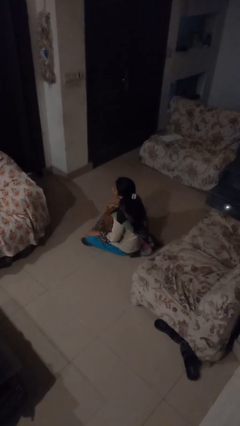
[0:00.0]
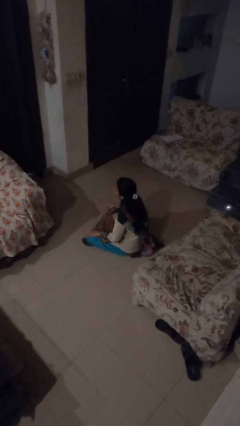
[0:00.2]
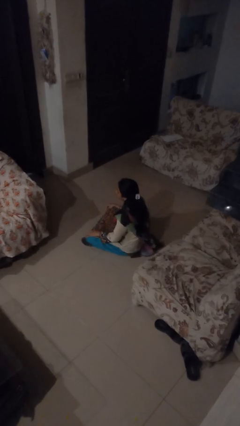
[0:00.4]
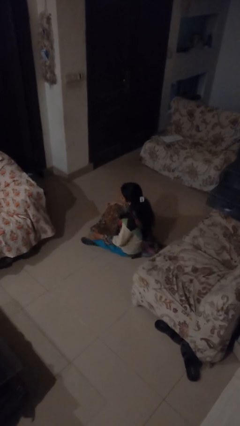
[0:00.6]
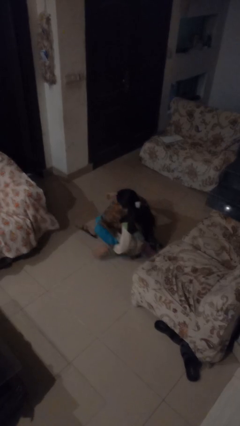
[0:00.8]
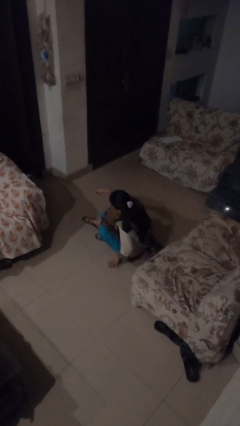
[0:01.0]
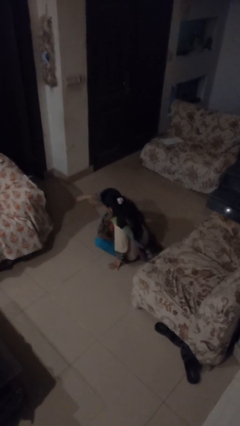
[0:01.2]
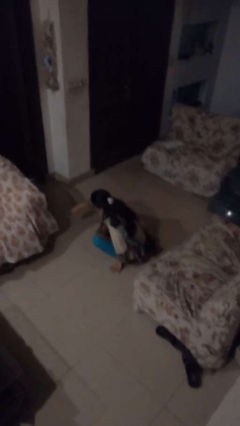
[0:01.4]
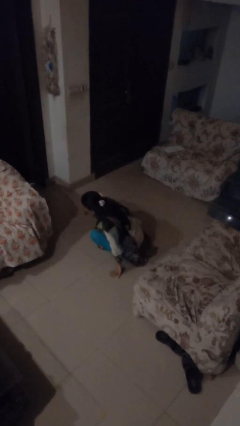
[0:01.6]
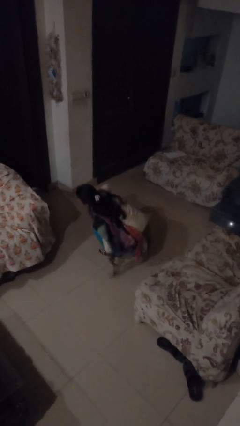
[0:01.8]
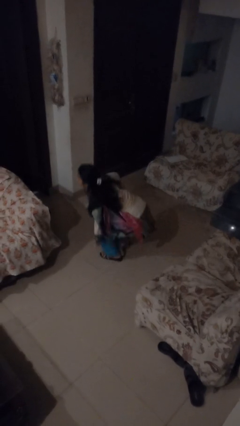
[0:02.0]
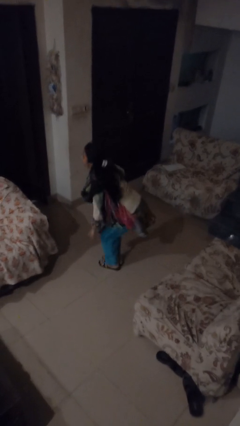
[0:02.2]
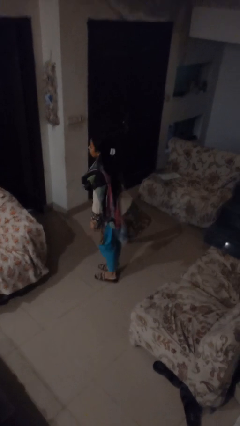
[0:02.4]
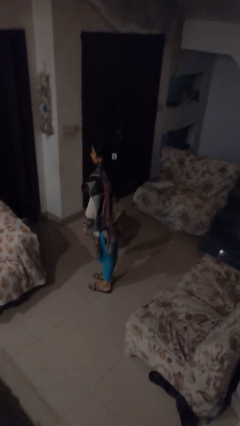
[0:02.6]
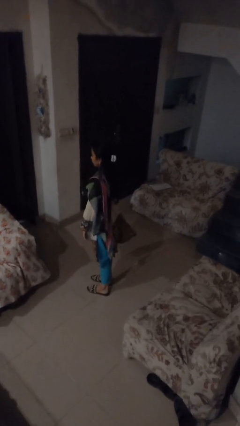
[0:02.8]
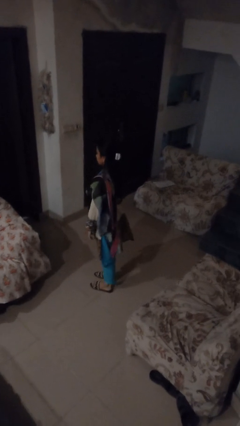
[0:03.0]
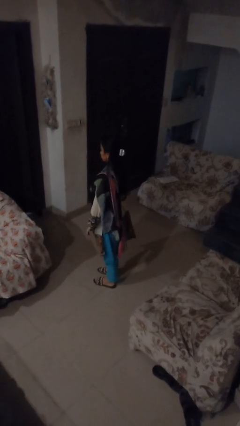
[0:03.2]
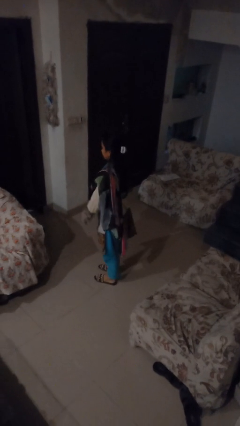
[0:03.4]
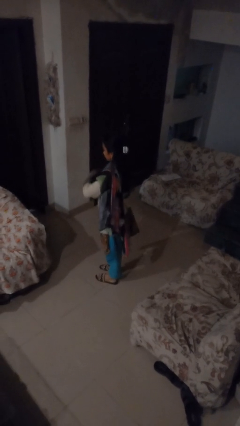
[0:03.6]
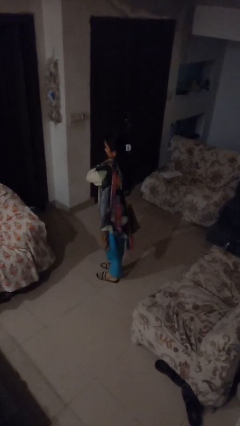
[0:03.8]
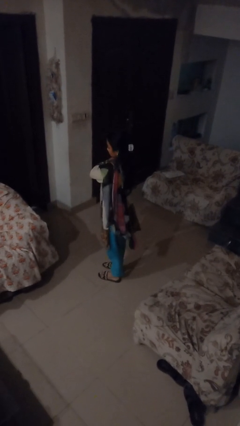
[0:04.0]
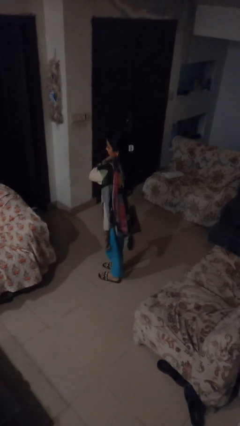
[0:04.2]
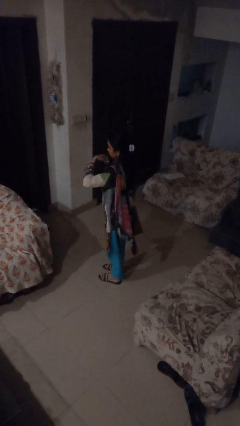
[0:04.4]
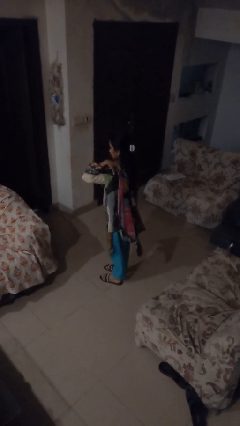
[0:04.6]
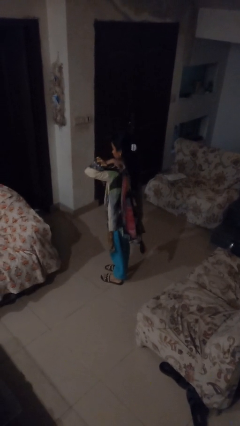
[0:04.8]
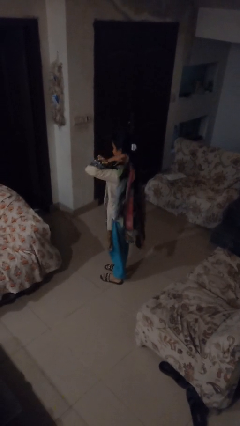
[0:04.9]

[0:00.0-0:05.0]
person stands up from floor

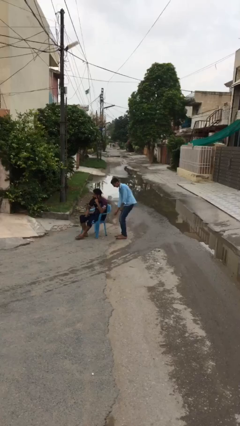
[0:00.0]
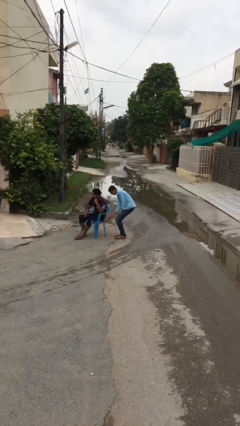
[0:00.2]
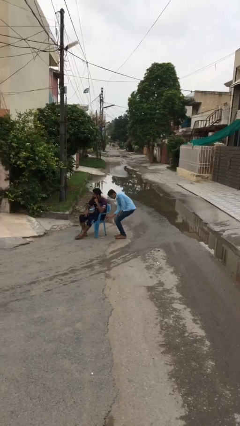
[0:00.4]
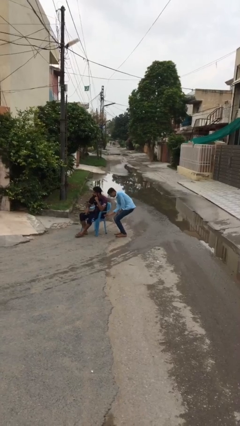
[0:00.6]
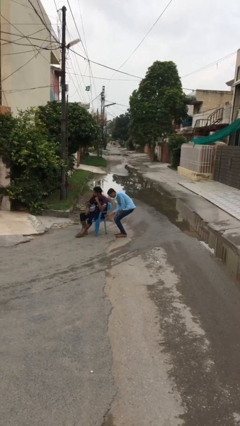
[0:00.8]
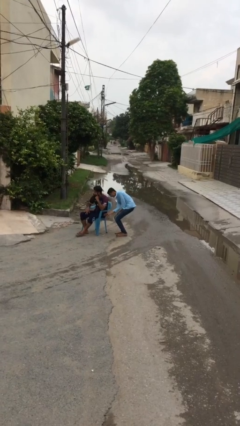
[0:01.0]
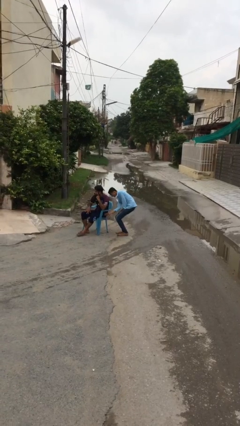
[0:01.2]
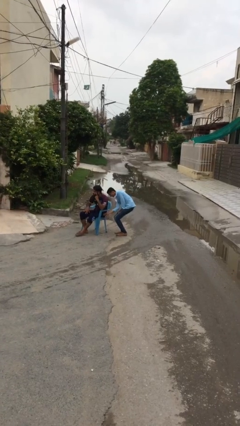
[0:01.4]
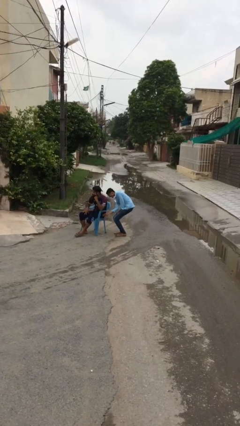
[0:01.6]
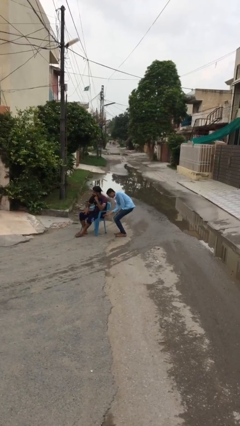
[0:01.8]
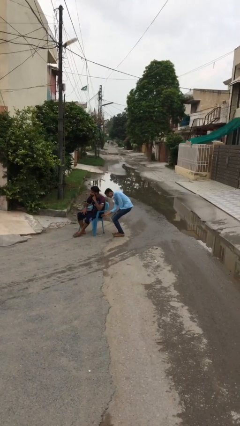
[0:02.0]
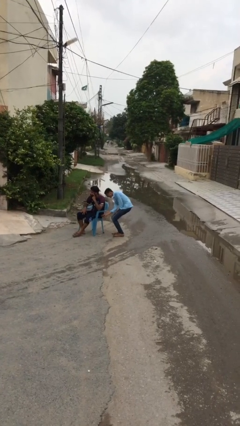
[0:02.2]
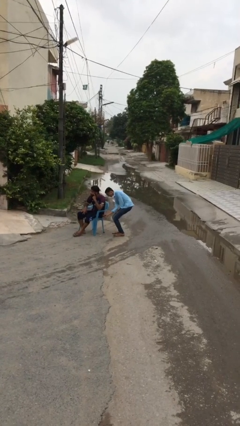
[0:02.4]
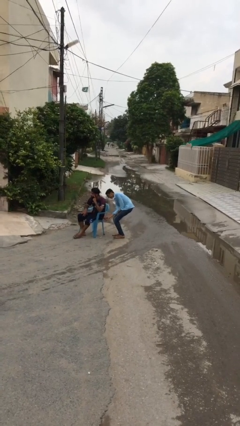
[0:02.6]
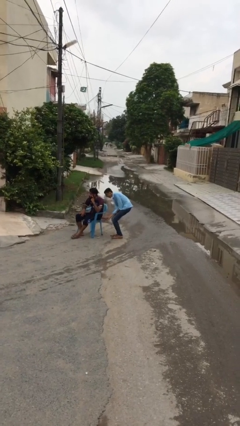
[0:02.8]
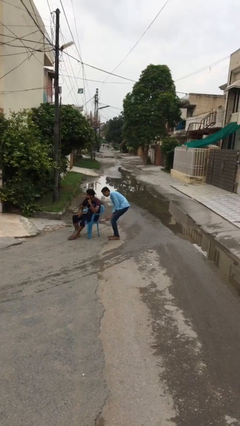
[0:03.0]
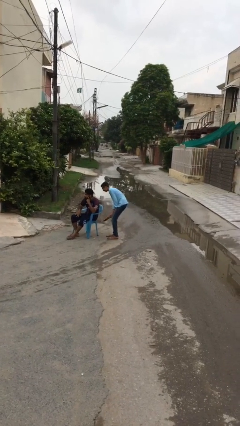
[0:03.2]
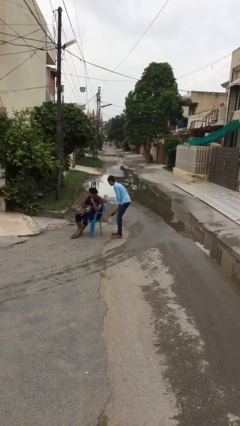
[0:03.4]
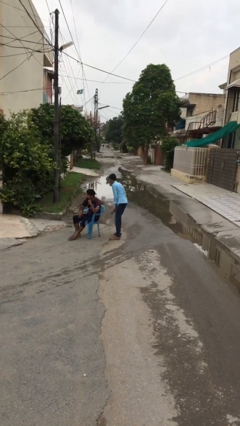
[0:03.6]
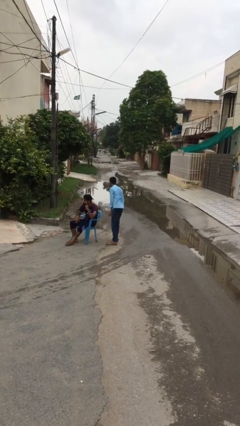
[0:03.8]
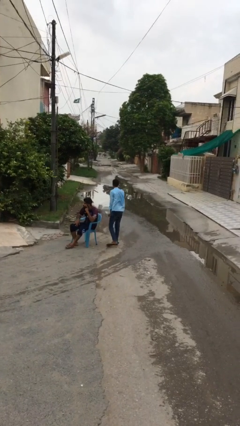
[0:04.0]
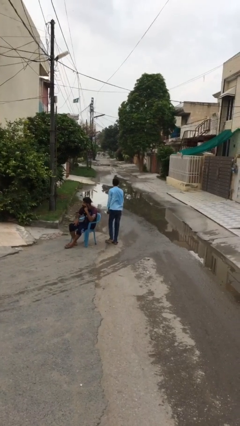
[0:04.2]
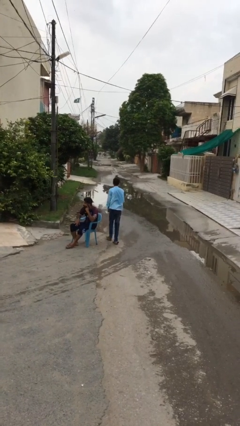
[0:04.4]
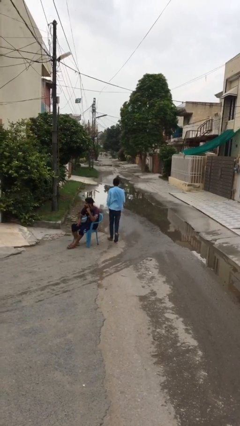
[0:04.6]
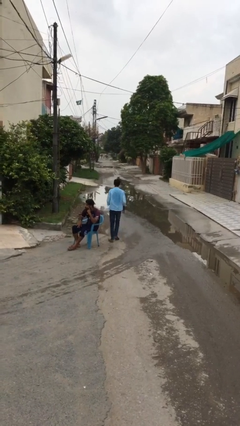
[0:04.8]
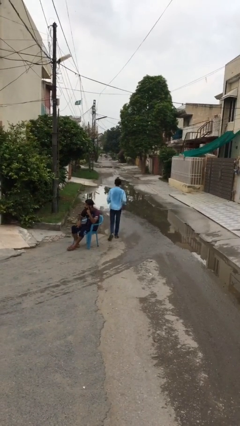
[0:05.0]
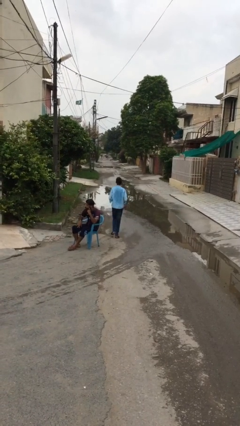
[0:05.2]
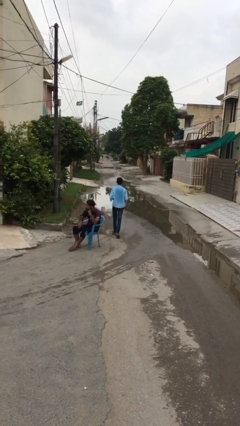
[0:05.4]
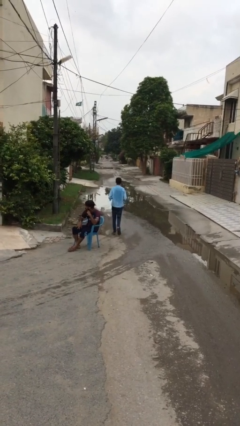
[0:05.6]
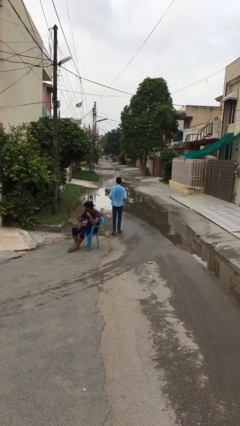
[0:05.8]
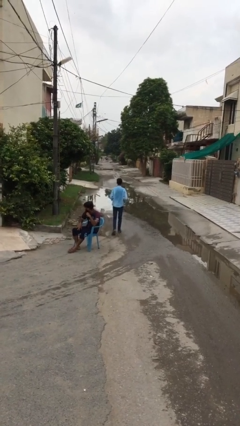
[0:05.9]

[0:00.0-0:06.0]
person steals object from person

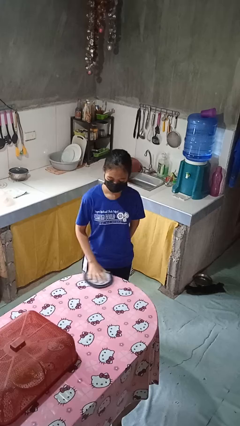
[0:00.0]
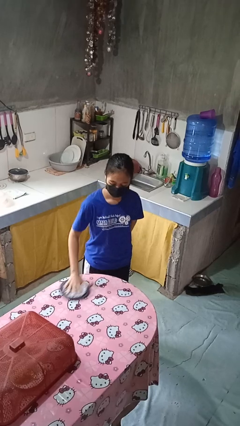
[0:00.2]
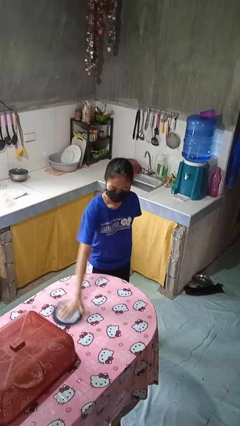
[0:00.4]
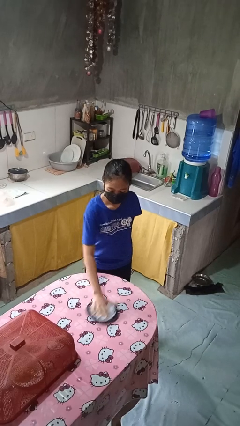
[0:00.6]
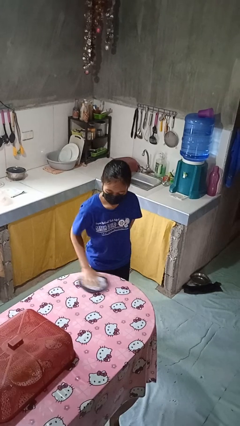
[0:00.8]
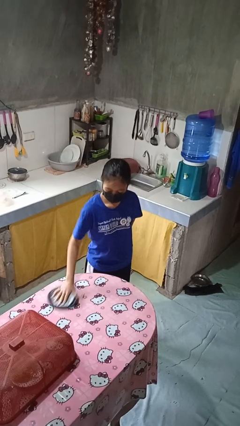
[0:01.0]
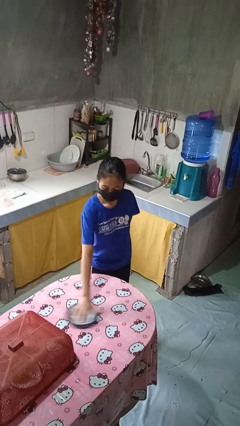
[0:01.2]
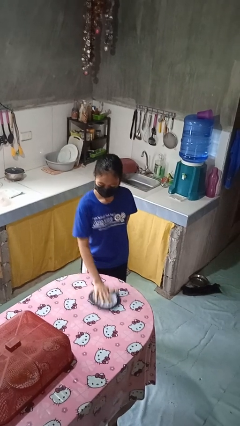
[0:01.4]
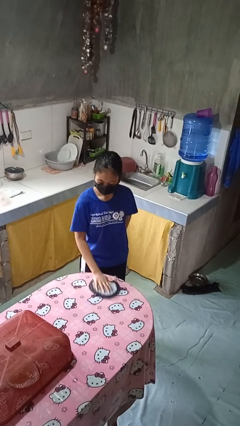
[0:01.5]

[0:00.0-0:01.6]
person cleans table with rag

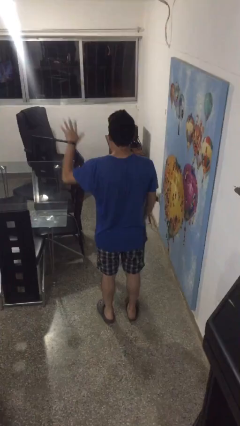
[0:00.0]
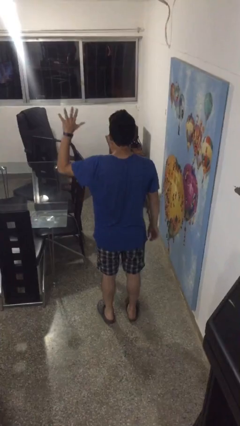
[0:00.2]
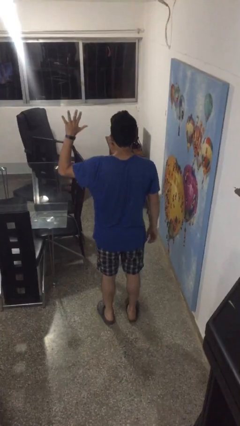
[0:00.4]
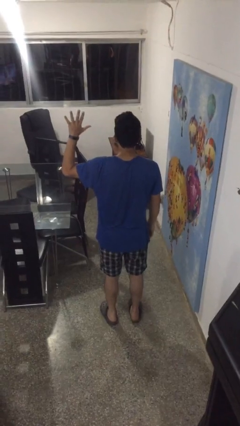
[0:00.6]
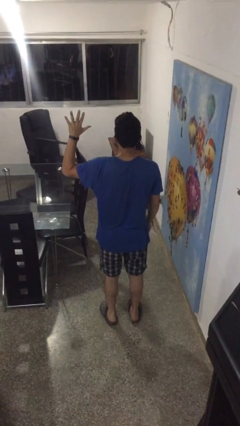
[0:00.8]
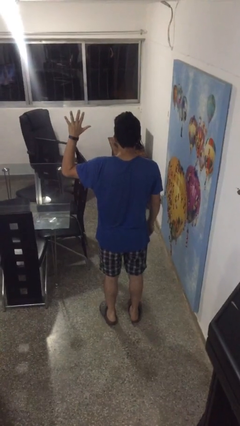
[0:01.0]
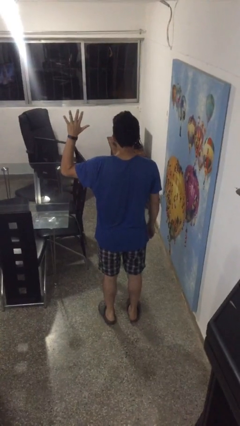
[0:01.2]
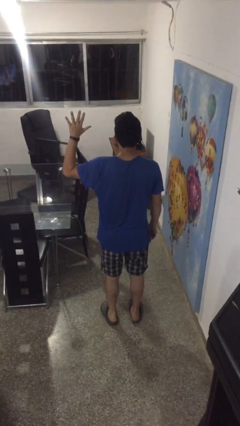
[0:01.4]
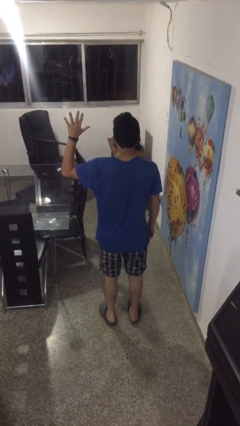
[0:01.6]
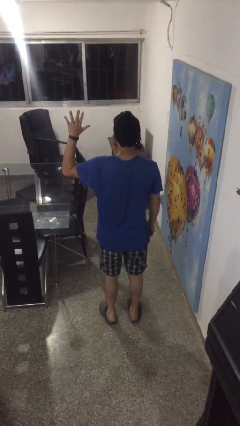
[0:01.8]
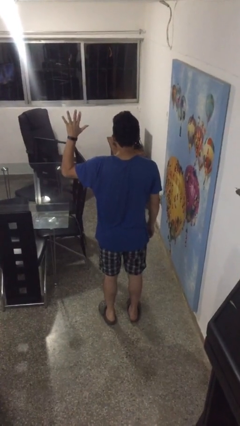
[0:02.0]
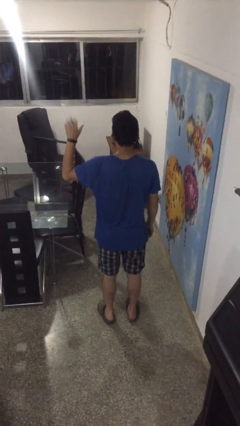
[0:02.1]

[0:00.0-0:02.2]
person gestures number five

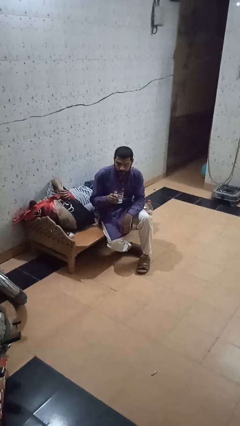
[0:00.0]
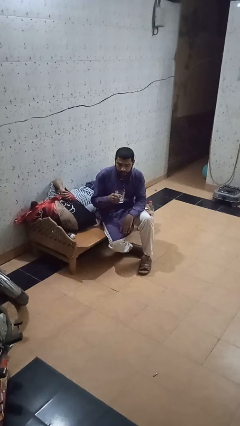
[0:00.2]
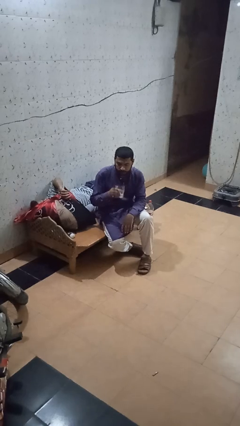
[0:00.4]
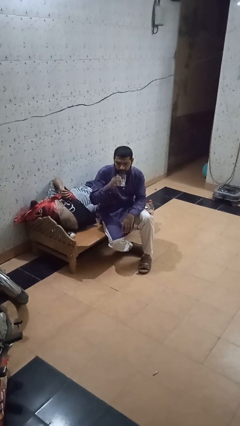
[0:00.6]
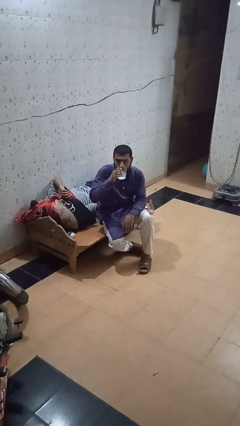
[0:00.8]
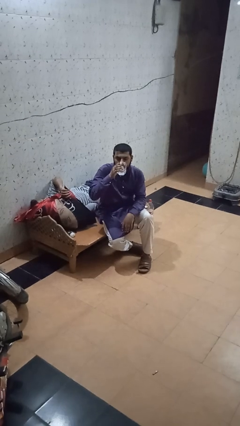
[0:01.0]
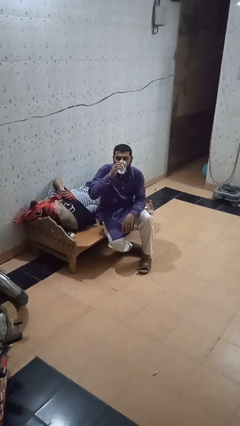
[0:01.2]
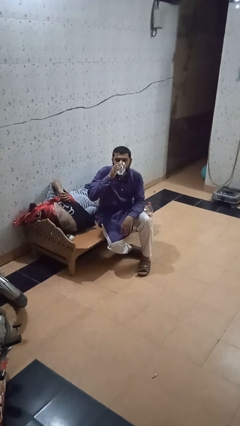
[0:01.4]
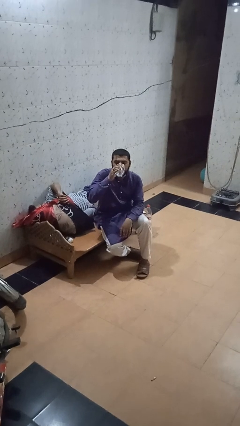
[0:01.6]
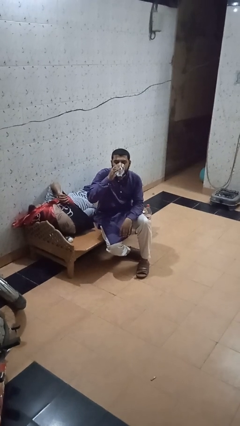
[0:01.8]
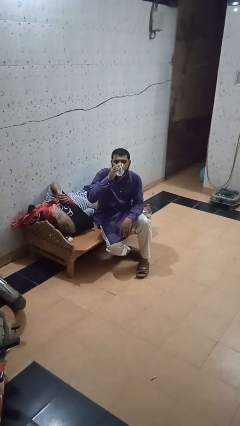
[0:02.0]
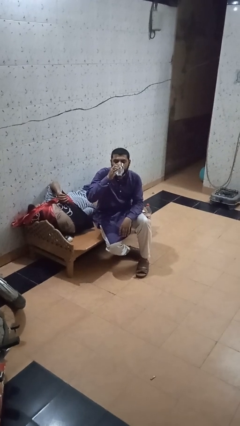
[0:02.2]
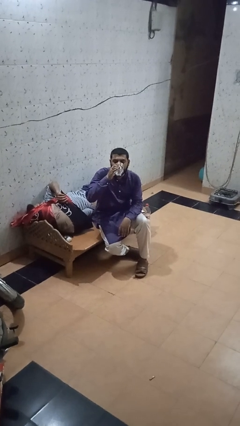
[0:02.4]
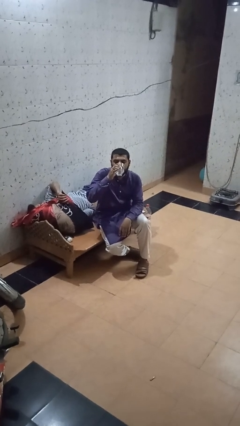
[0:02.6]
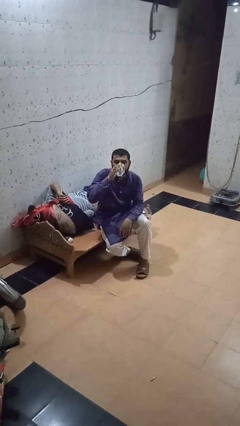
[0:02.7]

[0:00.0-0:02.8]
person drinks from mug
